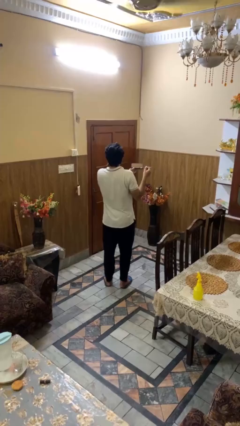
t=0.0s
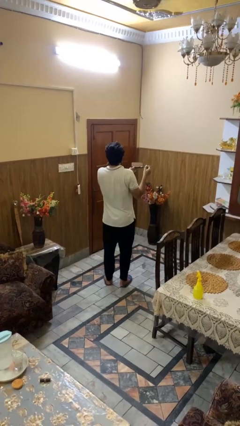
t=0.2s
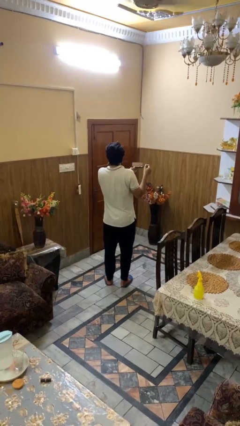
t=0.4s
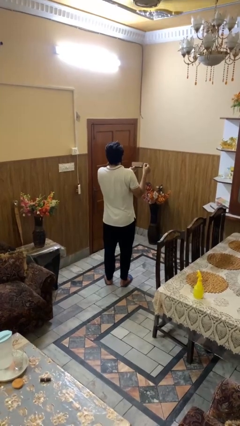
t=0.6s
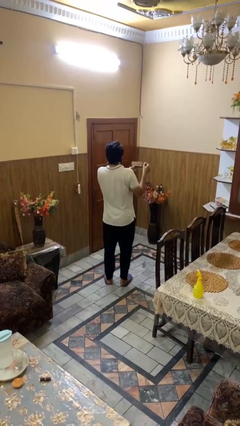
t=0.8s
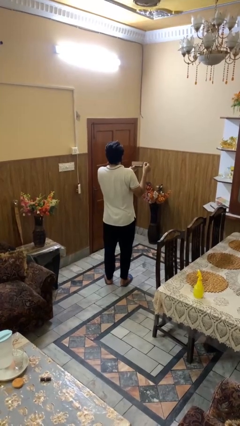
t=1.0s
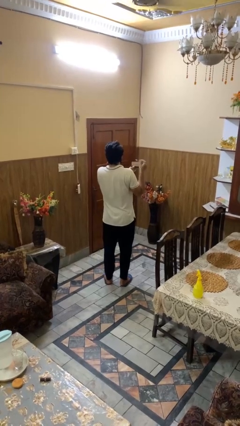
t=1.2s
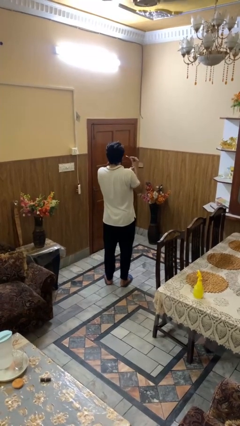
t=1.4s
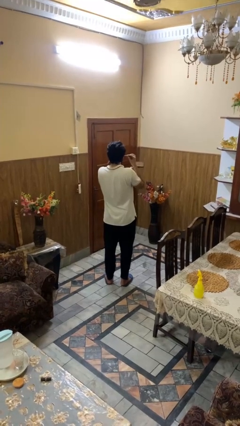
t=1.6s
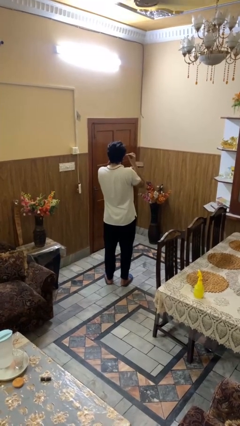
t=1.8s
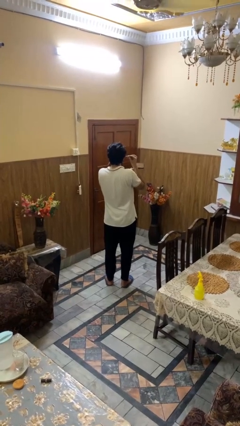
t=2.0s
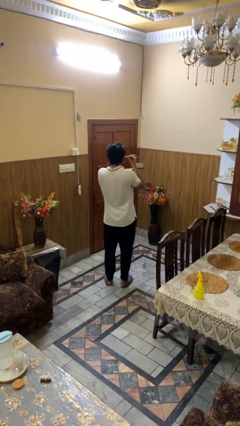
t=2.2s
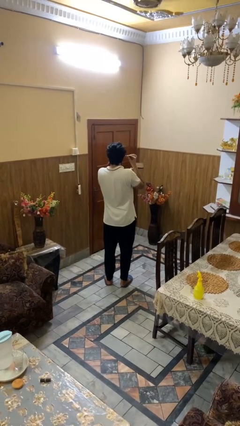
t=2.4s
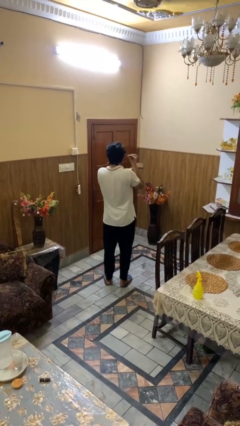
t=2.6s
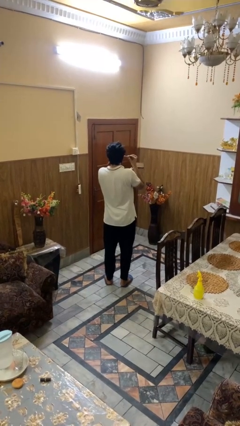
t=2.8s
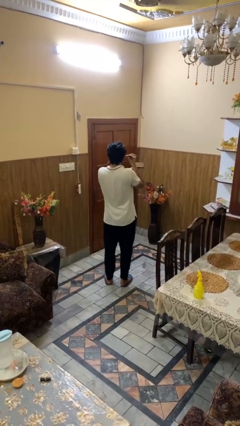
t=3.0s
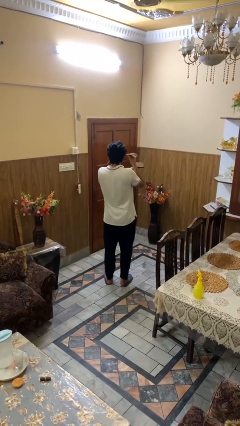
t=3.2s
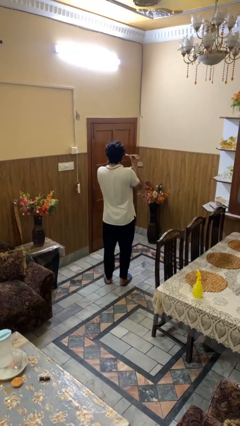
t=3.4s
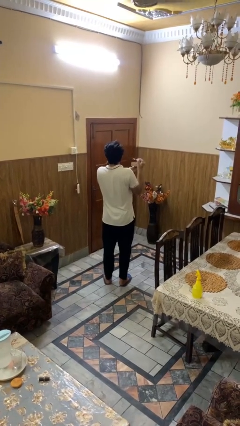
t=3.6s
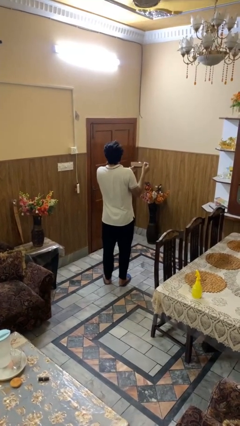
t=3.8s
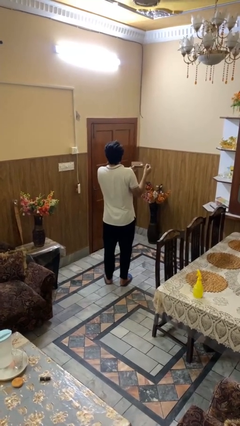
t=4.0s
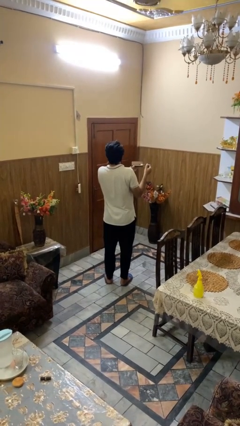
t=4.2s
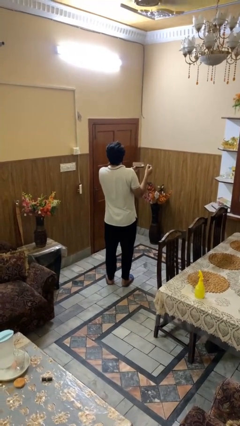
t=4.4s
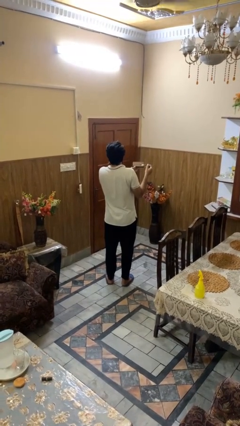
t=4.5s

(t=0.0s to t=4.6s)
person applies eye makeup

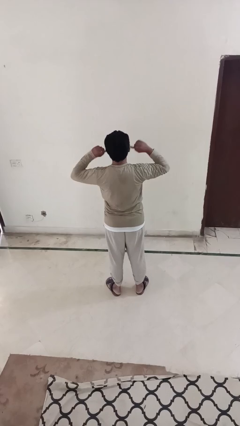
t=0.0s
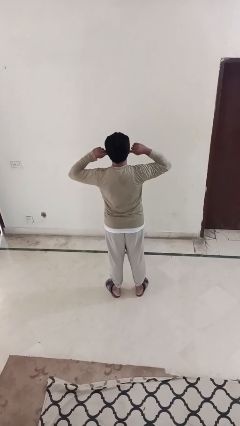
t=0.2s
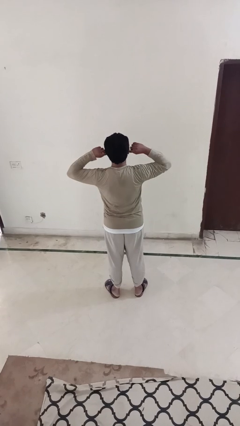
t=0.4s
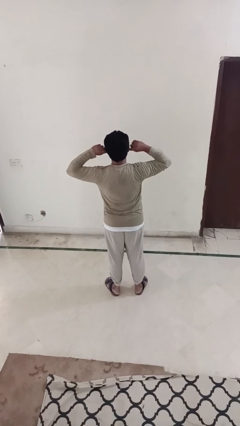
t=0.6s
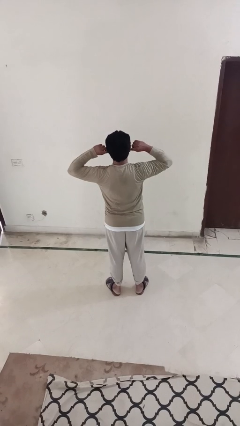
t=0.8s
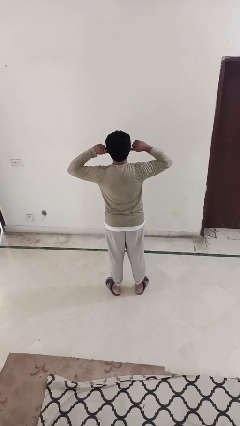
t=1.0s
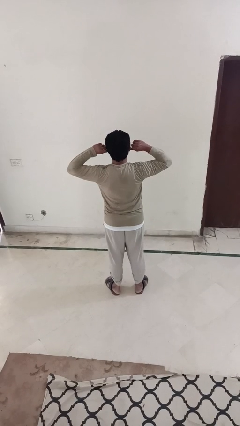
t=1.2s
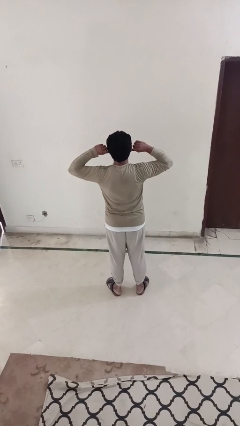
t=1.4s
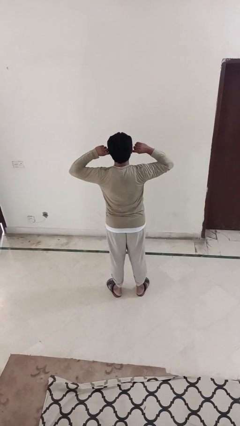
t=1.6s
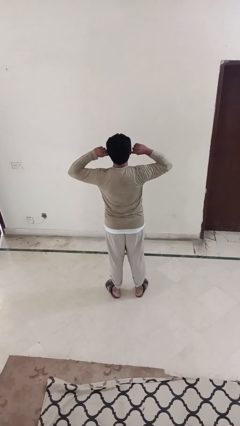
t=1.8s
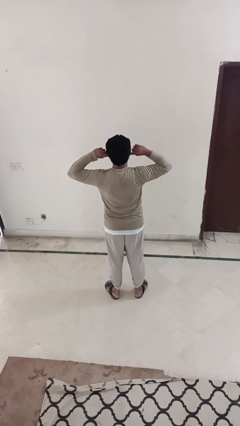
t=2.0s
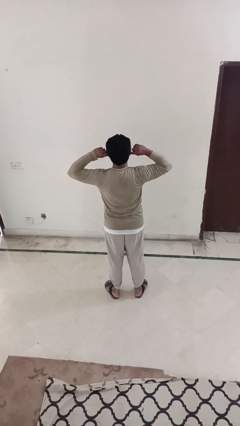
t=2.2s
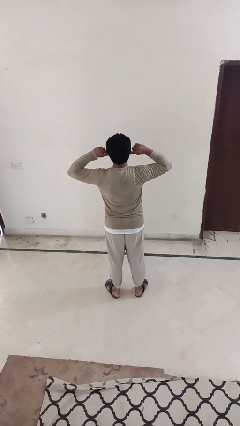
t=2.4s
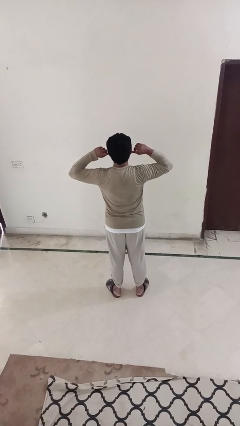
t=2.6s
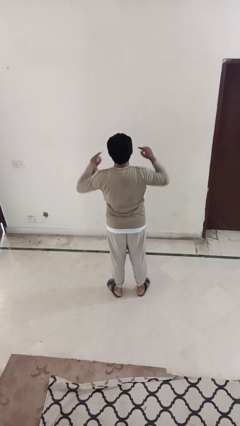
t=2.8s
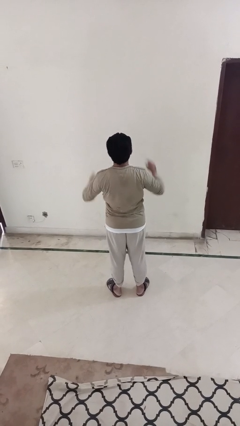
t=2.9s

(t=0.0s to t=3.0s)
person puts fingers in ear

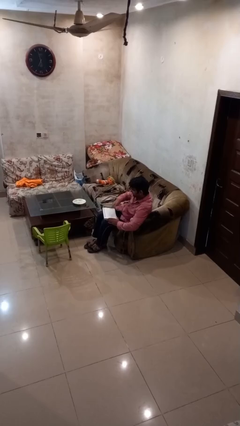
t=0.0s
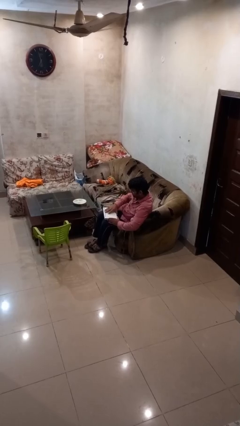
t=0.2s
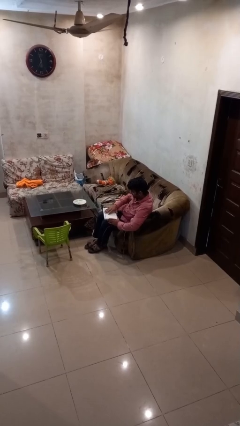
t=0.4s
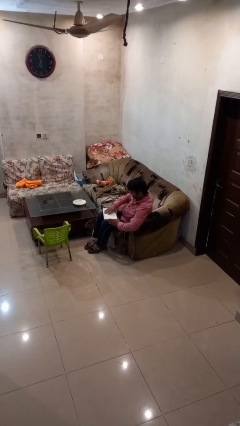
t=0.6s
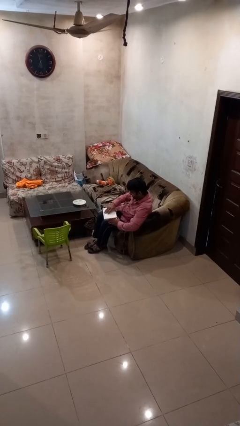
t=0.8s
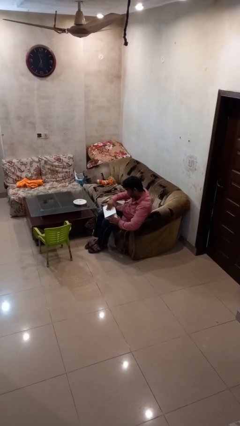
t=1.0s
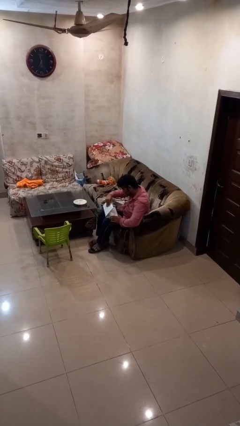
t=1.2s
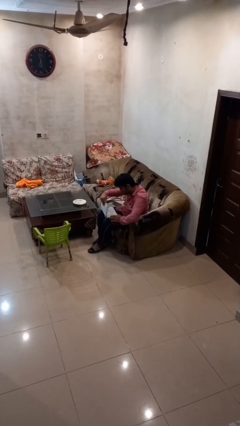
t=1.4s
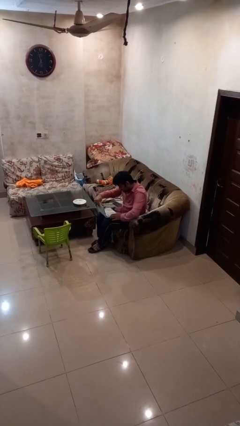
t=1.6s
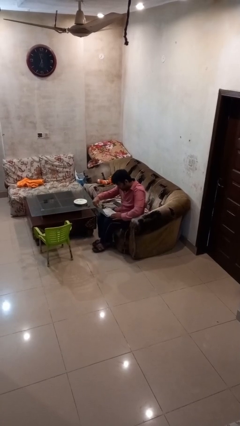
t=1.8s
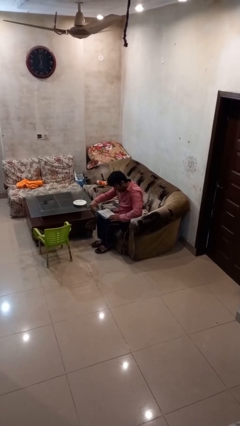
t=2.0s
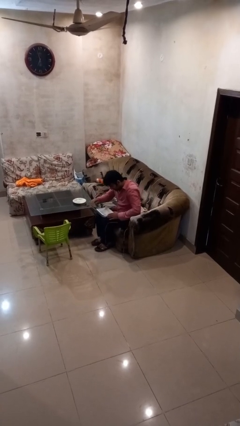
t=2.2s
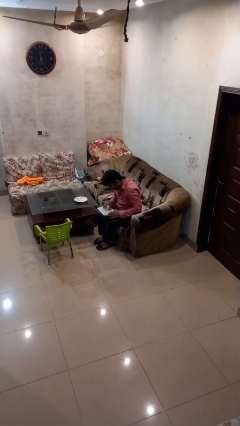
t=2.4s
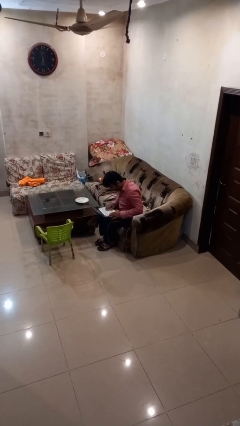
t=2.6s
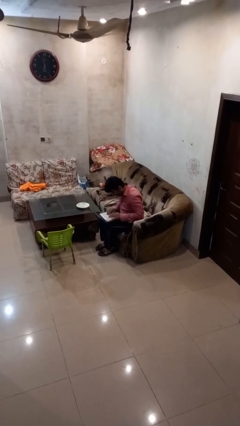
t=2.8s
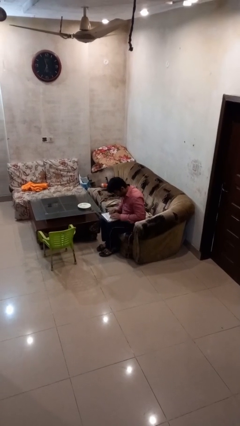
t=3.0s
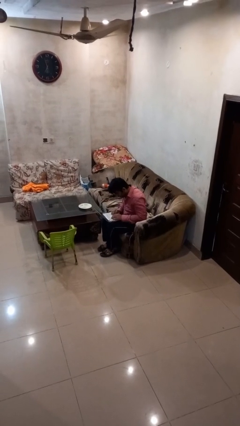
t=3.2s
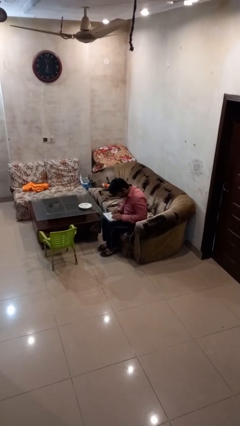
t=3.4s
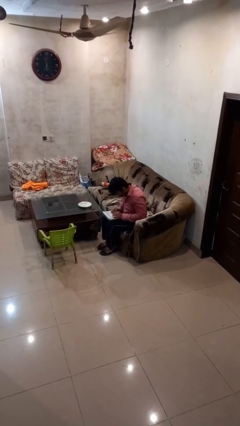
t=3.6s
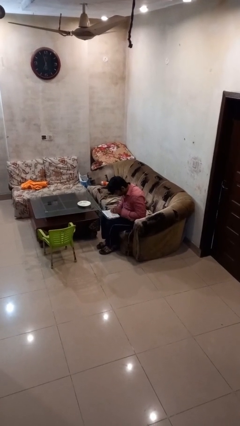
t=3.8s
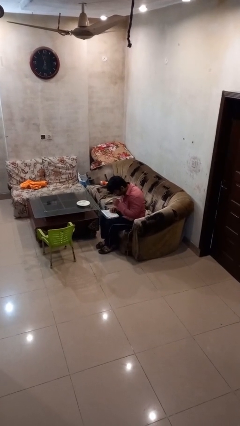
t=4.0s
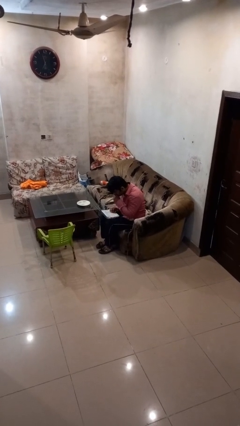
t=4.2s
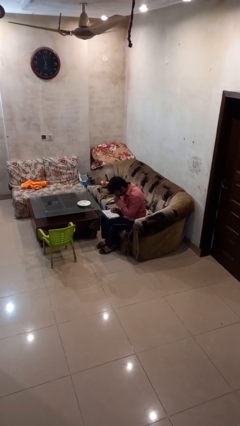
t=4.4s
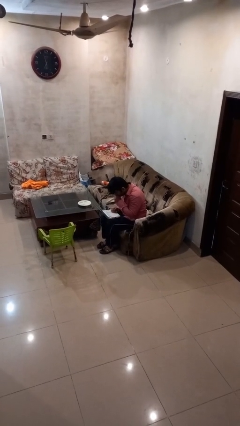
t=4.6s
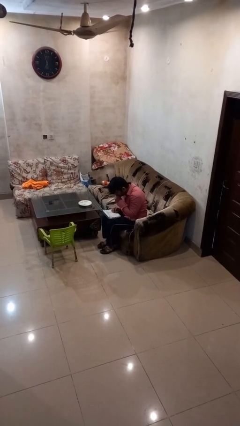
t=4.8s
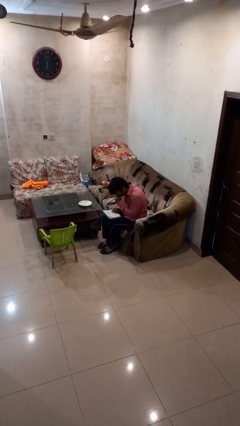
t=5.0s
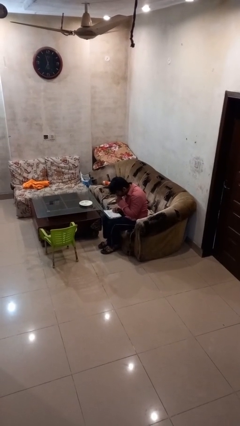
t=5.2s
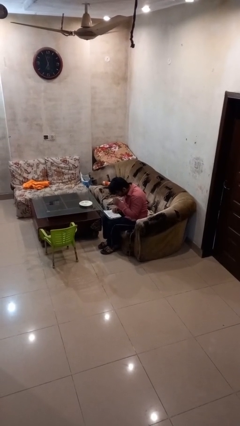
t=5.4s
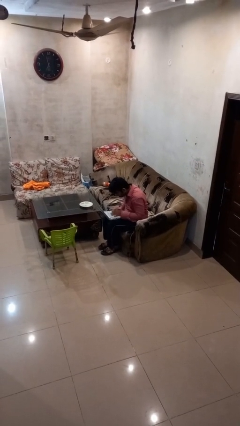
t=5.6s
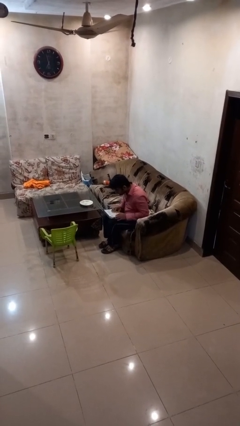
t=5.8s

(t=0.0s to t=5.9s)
person interacts with laptop

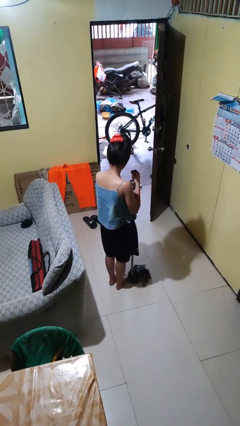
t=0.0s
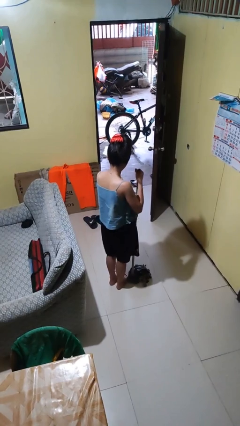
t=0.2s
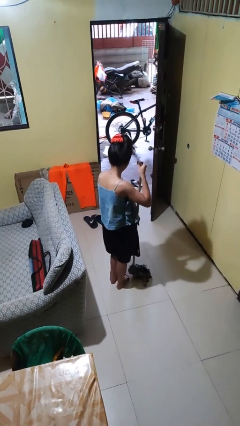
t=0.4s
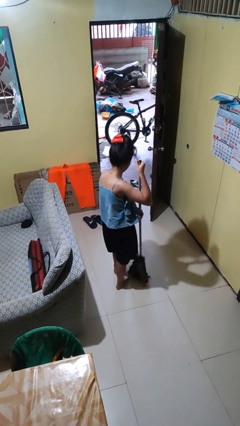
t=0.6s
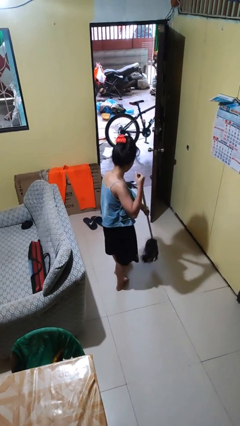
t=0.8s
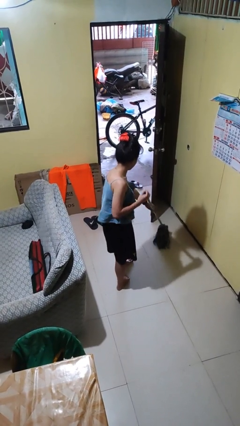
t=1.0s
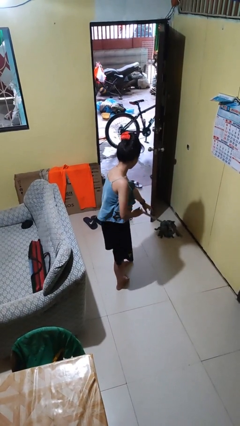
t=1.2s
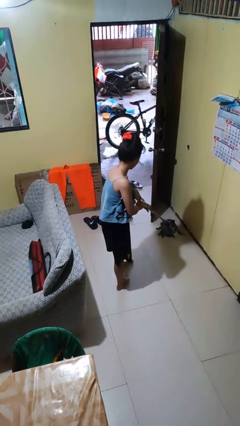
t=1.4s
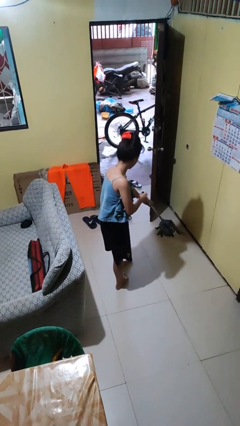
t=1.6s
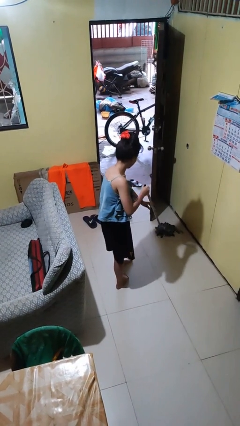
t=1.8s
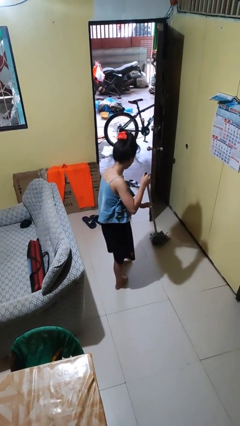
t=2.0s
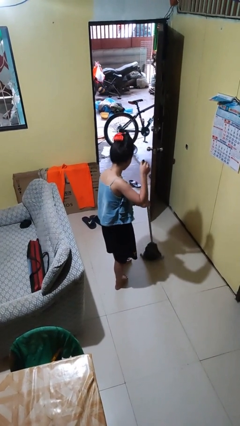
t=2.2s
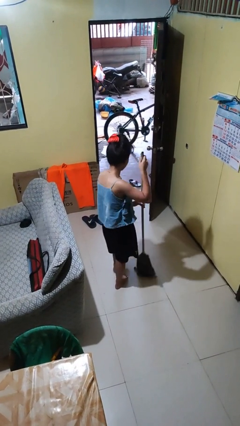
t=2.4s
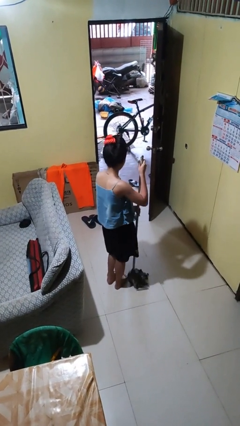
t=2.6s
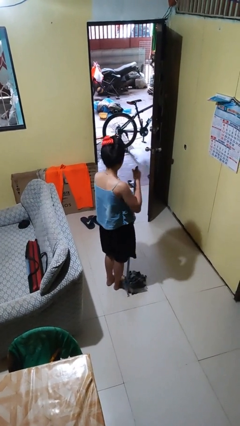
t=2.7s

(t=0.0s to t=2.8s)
person mops

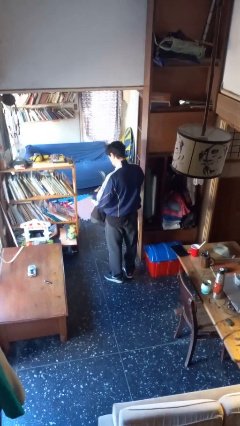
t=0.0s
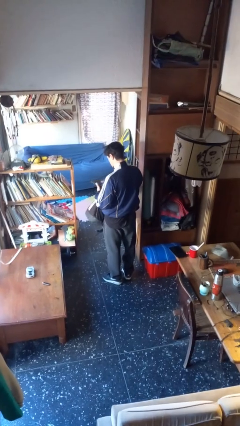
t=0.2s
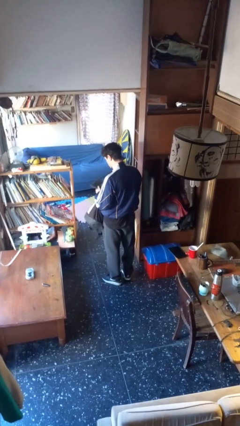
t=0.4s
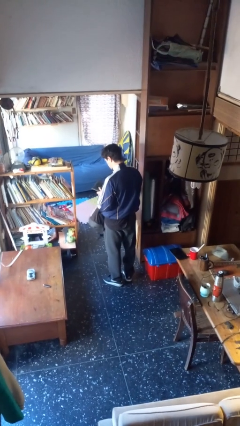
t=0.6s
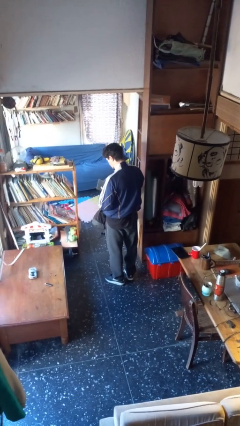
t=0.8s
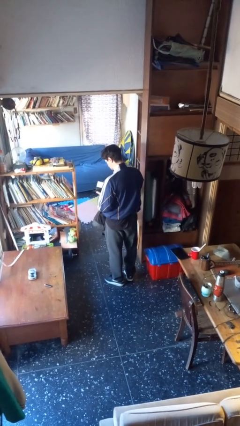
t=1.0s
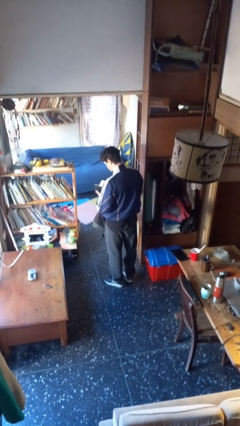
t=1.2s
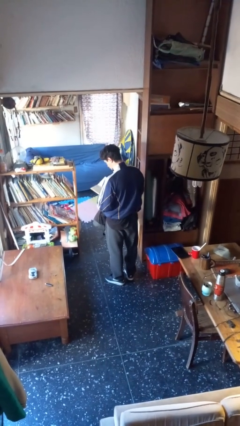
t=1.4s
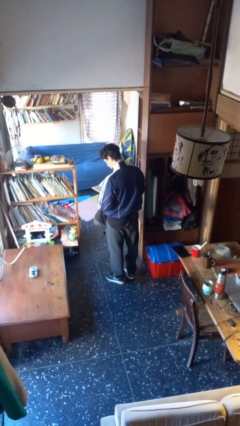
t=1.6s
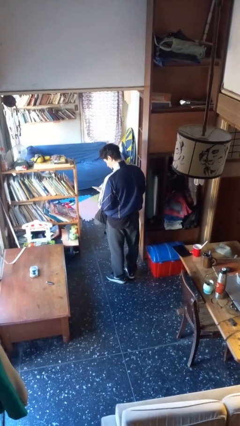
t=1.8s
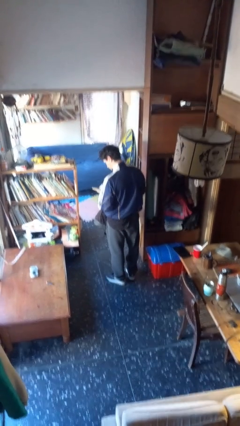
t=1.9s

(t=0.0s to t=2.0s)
person takes object from backpack
